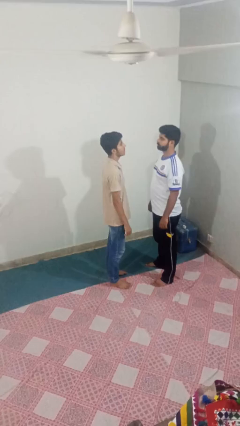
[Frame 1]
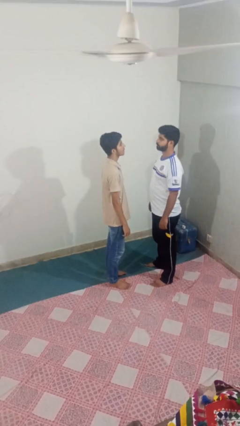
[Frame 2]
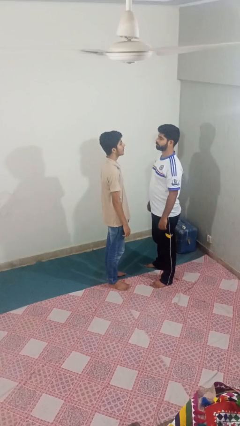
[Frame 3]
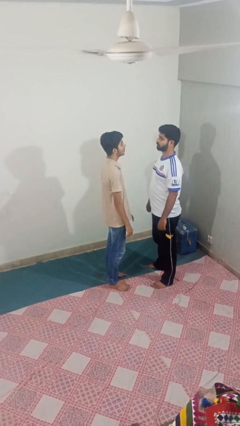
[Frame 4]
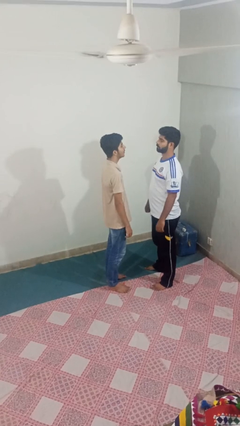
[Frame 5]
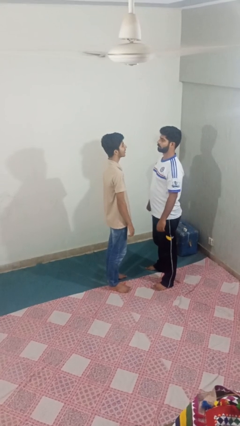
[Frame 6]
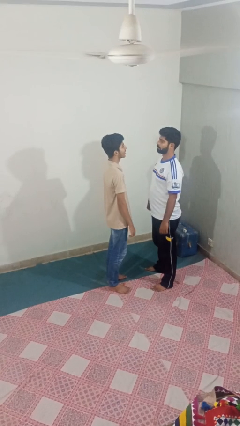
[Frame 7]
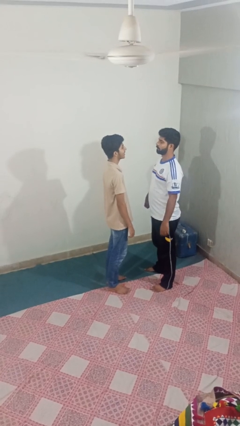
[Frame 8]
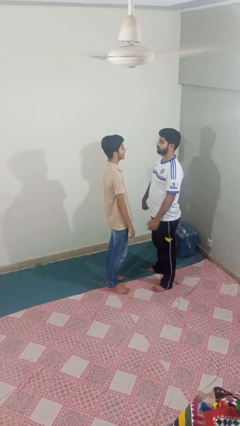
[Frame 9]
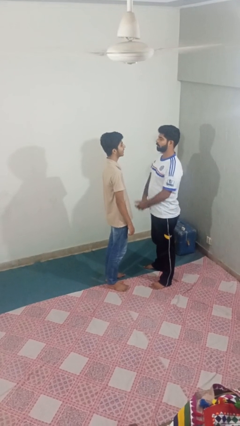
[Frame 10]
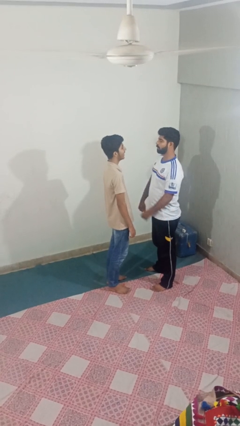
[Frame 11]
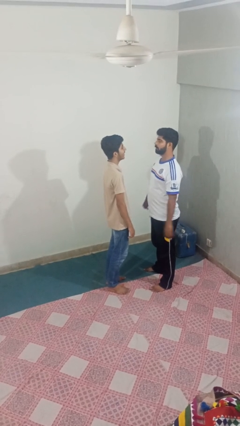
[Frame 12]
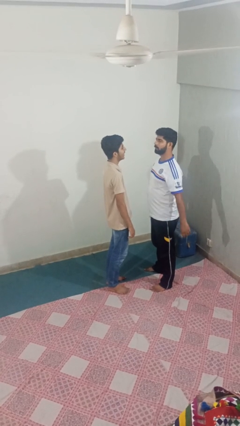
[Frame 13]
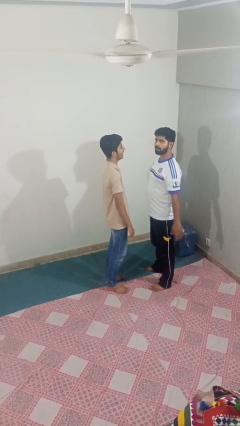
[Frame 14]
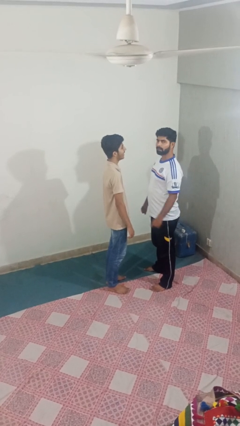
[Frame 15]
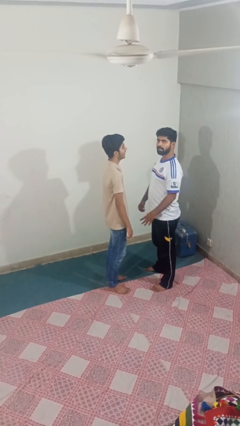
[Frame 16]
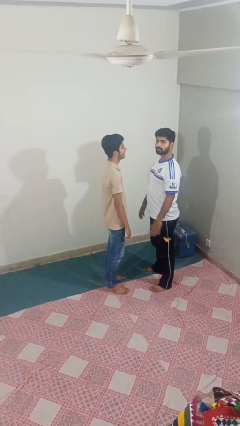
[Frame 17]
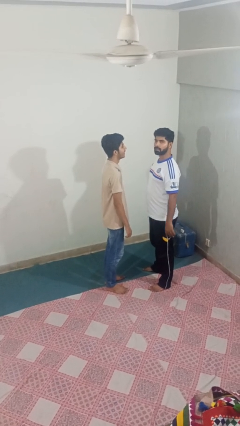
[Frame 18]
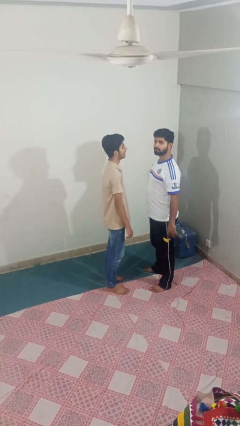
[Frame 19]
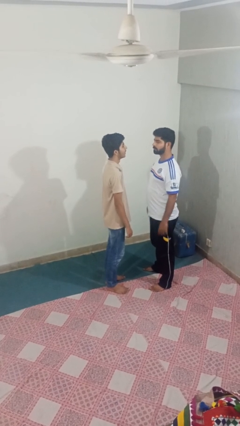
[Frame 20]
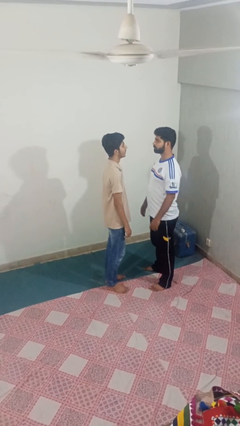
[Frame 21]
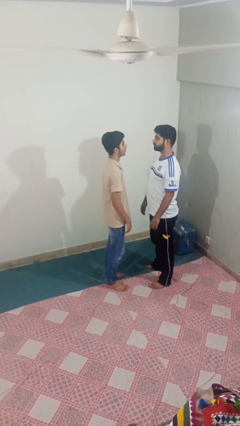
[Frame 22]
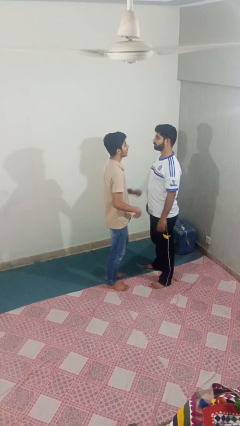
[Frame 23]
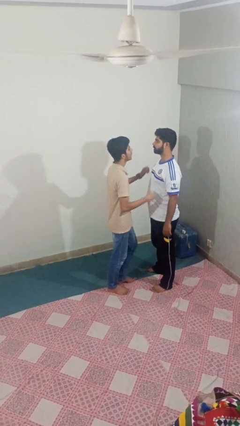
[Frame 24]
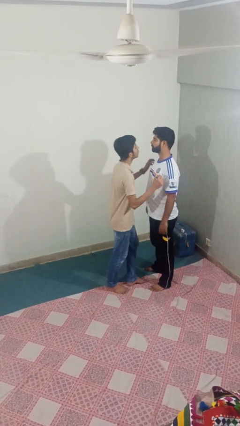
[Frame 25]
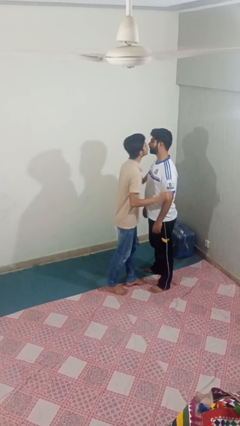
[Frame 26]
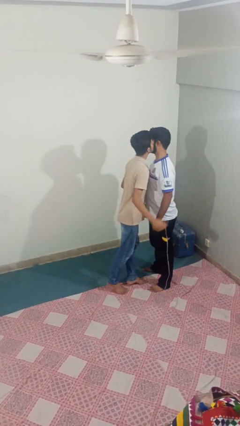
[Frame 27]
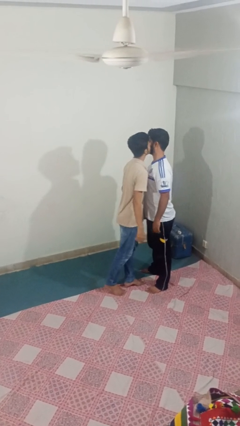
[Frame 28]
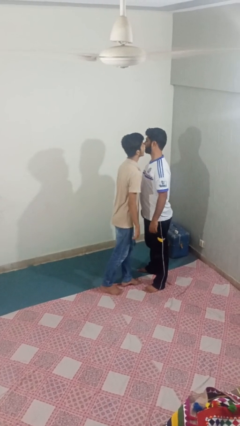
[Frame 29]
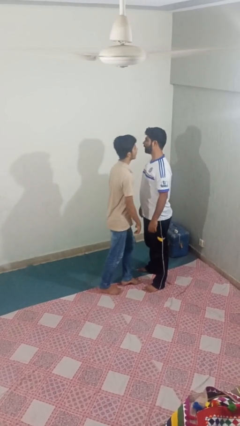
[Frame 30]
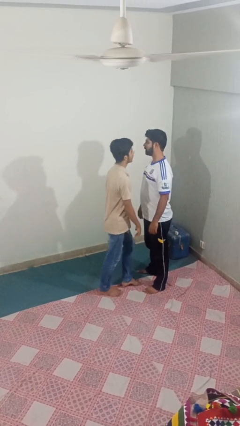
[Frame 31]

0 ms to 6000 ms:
person kisses cheek of person

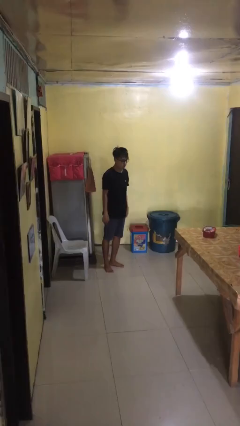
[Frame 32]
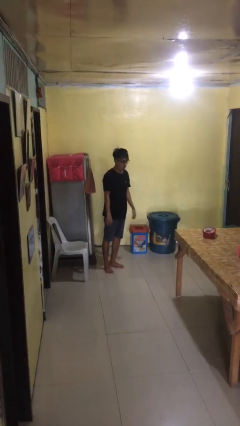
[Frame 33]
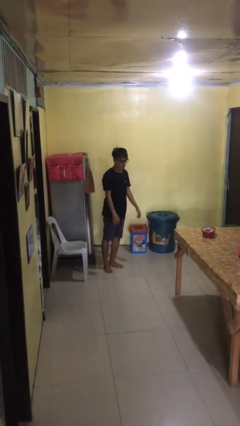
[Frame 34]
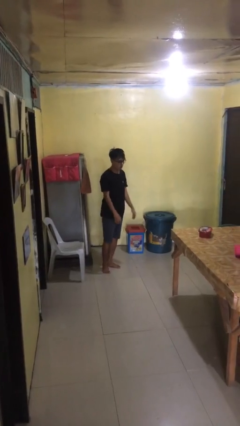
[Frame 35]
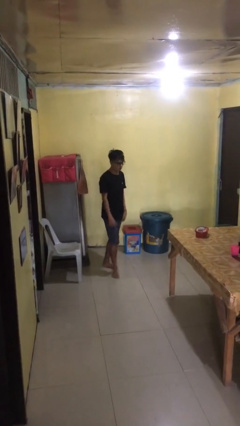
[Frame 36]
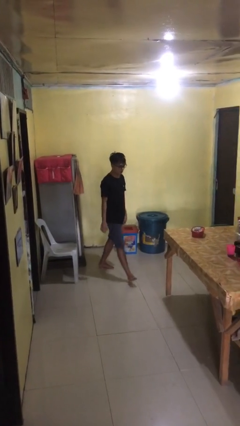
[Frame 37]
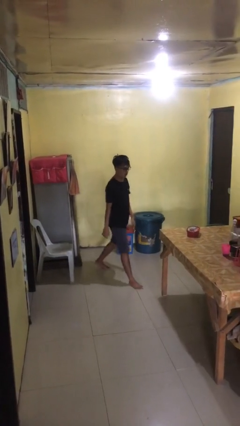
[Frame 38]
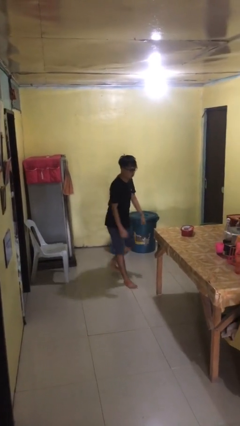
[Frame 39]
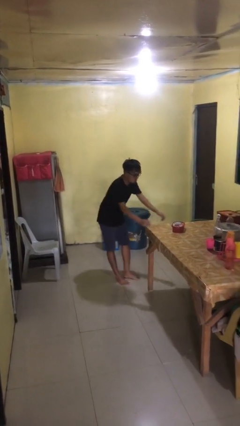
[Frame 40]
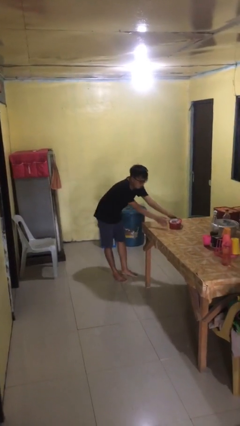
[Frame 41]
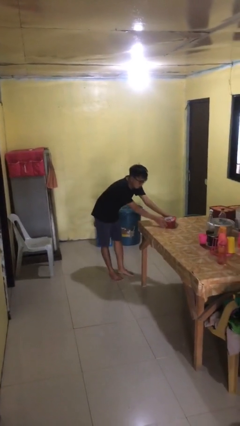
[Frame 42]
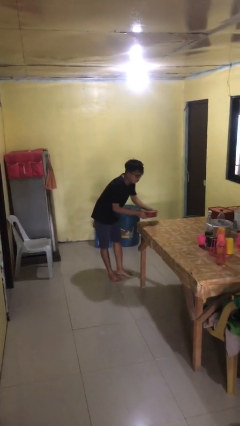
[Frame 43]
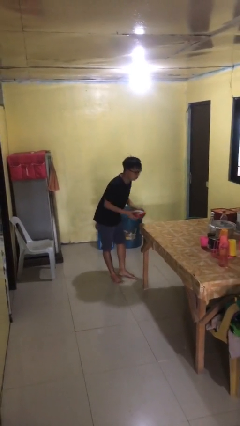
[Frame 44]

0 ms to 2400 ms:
person picks up object from table

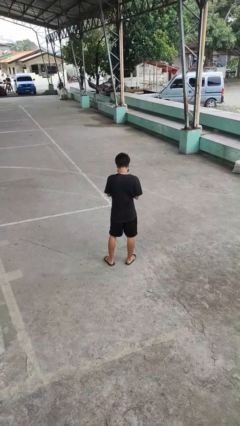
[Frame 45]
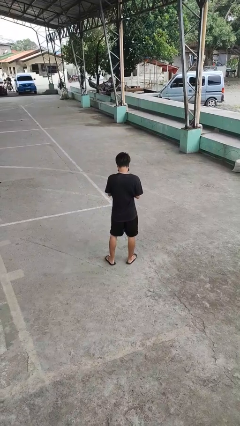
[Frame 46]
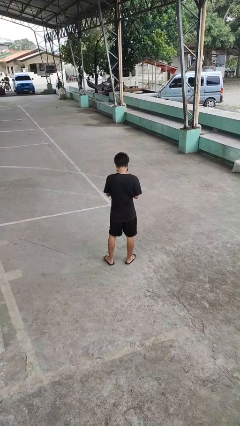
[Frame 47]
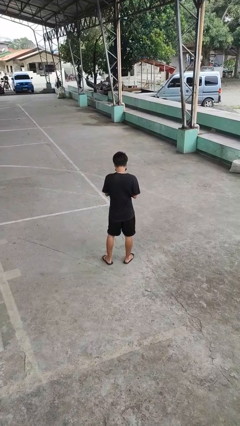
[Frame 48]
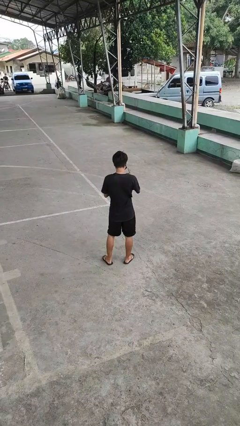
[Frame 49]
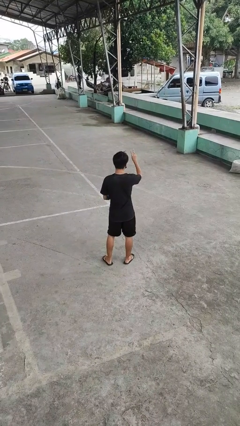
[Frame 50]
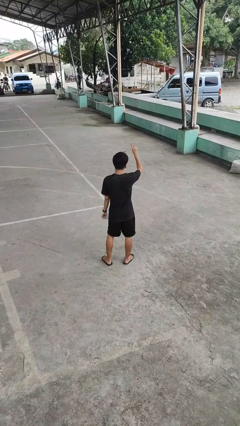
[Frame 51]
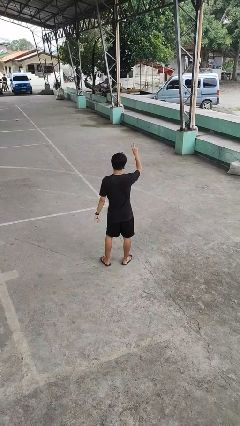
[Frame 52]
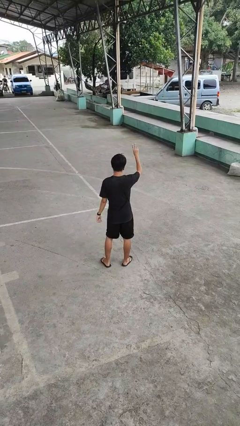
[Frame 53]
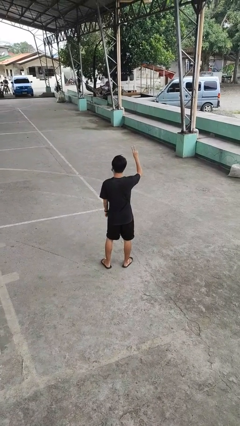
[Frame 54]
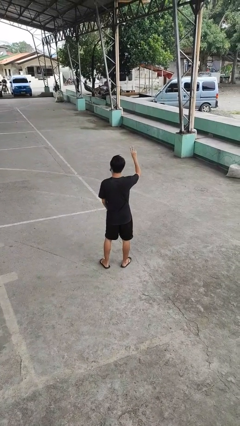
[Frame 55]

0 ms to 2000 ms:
person gestures peace

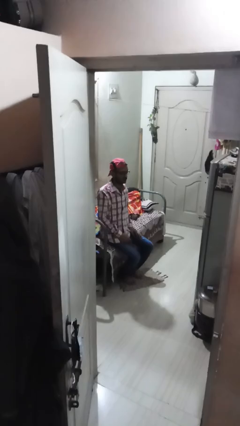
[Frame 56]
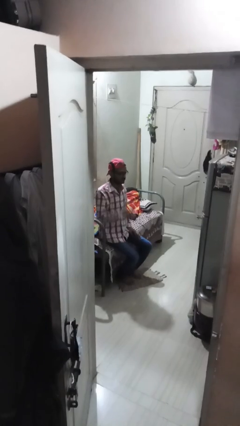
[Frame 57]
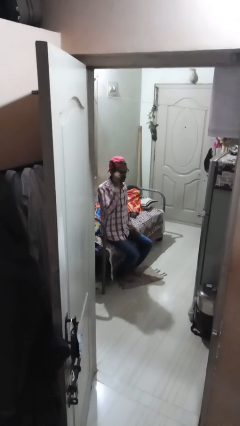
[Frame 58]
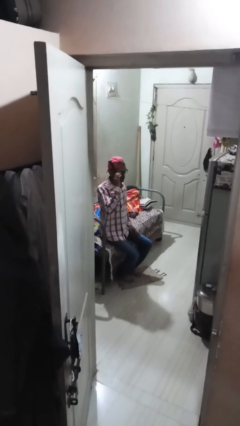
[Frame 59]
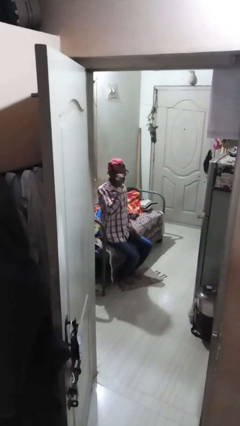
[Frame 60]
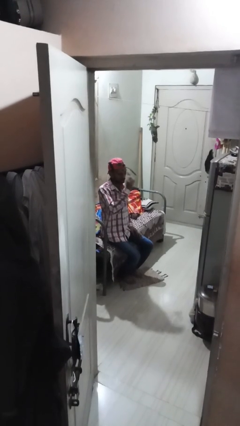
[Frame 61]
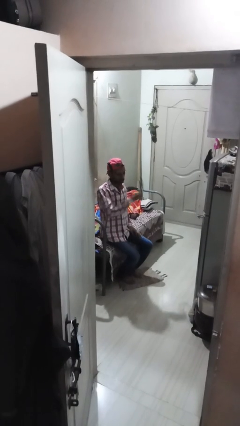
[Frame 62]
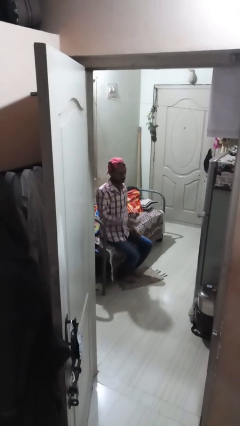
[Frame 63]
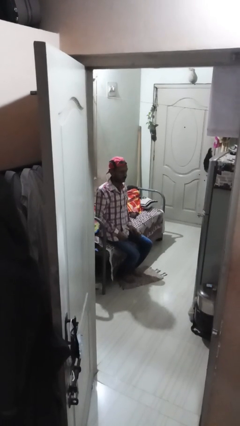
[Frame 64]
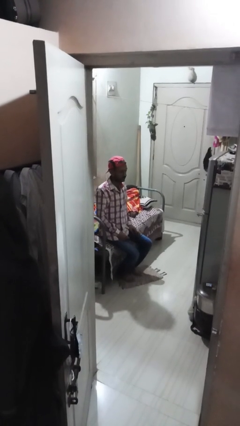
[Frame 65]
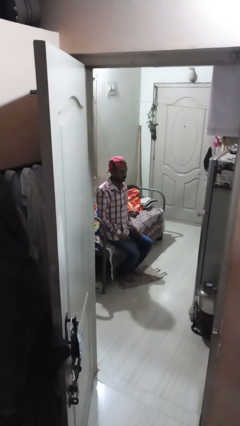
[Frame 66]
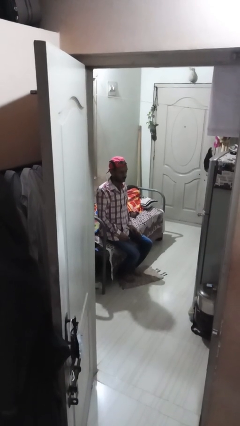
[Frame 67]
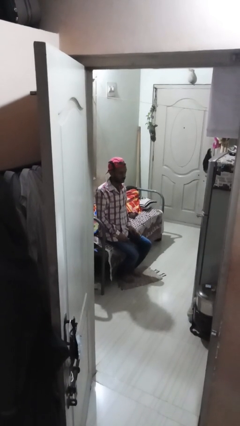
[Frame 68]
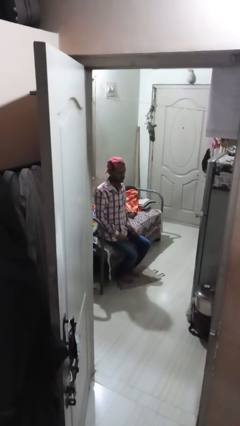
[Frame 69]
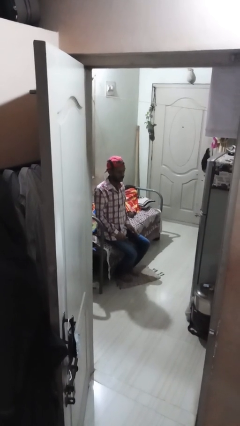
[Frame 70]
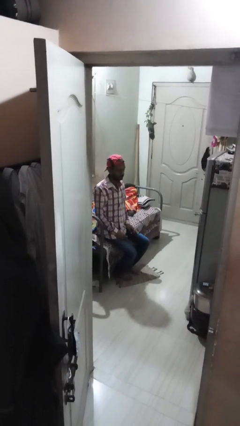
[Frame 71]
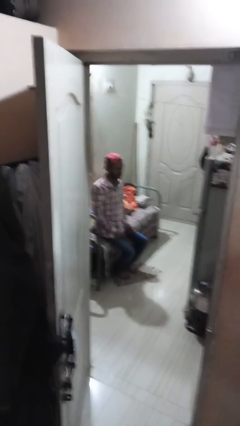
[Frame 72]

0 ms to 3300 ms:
person takes off glasses

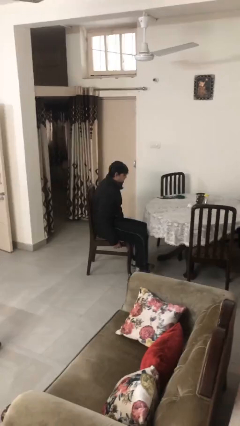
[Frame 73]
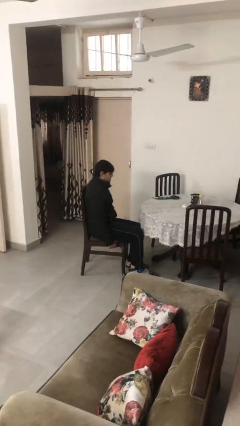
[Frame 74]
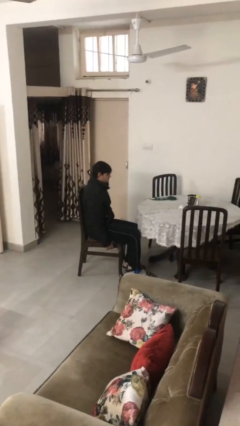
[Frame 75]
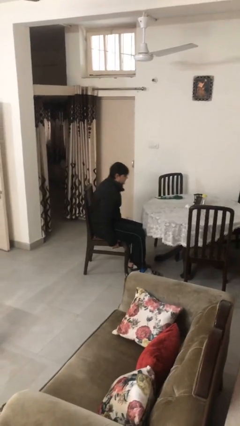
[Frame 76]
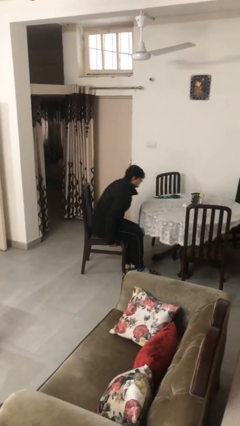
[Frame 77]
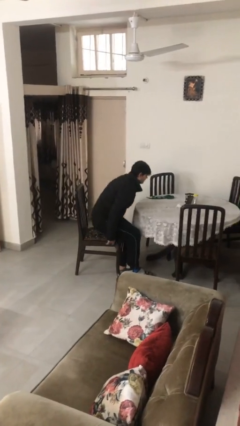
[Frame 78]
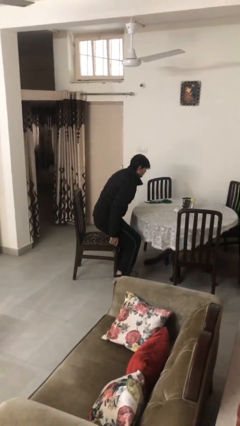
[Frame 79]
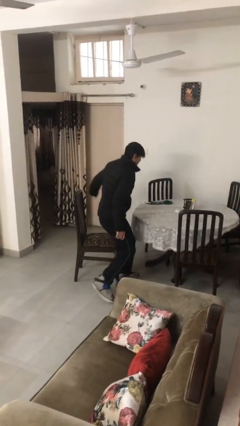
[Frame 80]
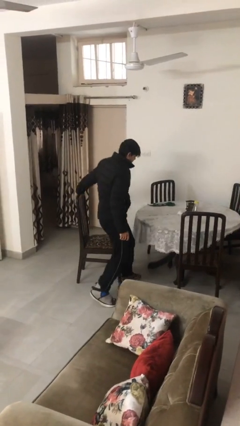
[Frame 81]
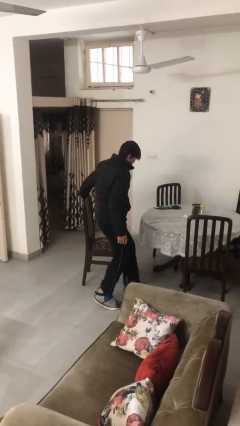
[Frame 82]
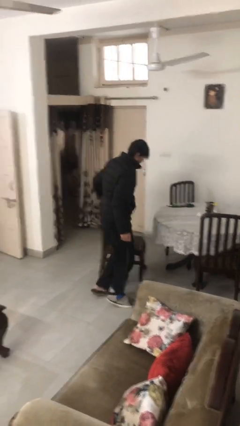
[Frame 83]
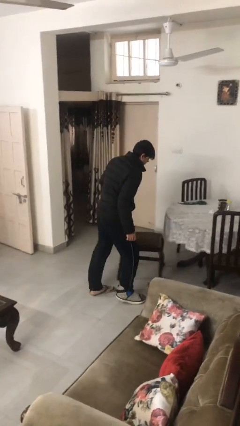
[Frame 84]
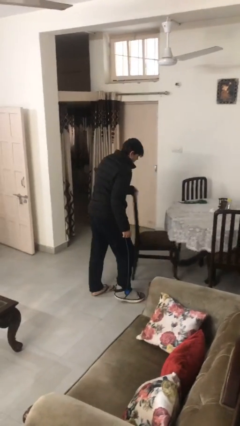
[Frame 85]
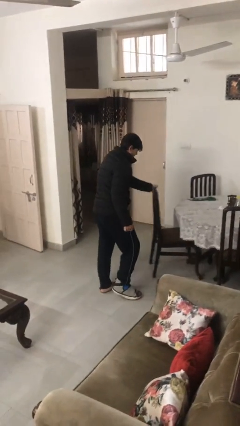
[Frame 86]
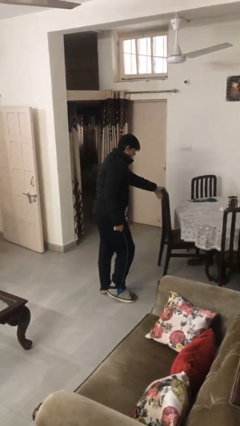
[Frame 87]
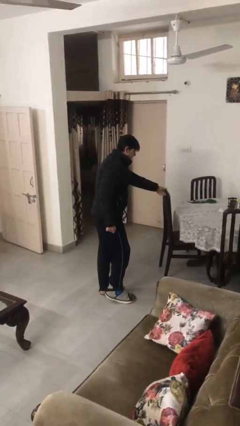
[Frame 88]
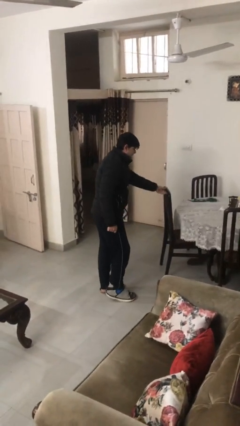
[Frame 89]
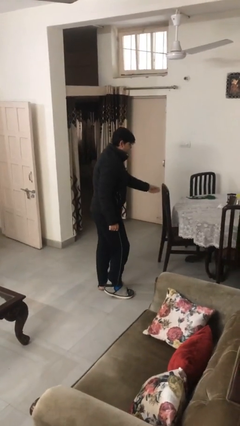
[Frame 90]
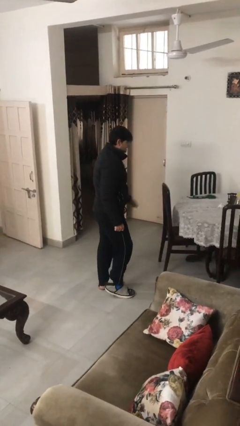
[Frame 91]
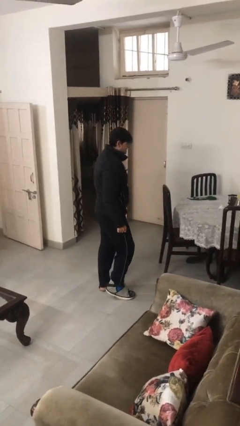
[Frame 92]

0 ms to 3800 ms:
person stands up

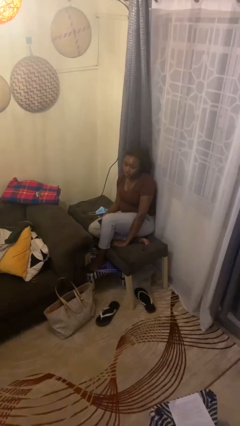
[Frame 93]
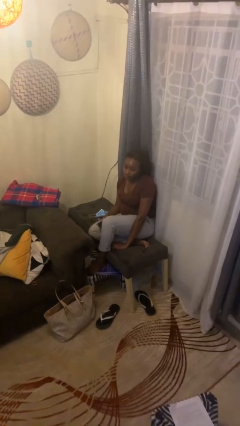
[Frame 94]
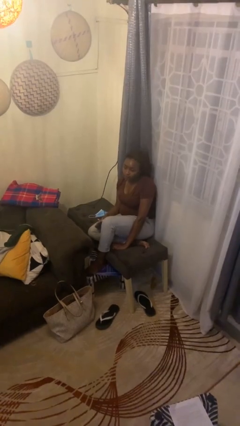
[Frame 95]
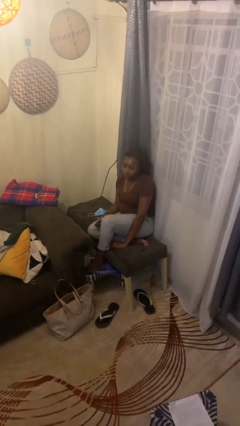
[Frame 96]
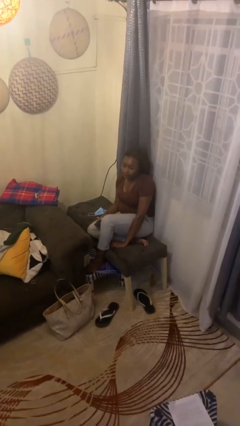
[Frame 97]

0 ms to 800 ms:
person uses television remote
